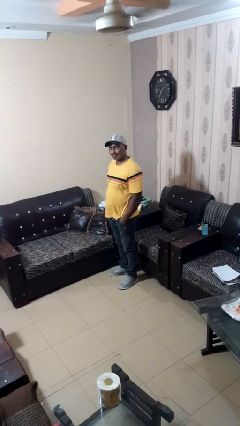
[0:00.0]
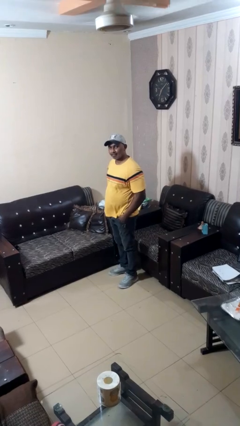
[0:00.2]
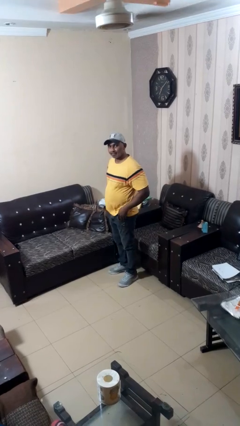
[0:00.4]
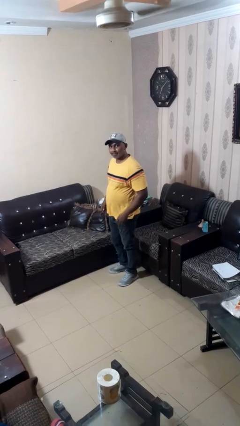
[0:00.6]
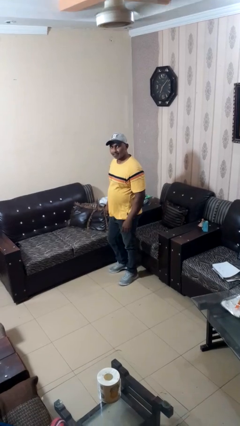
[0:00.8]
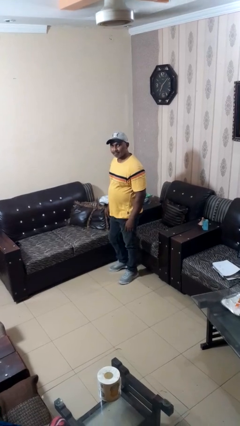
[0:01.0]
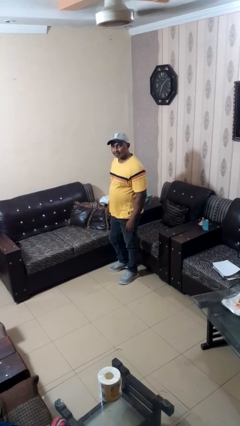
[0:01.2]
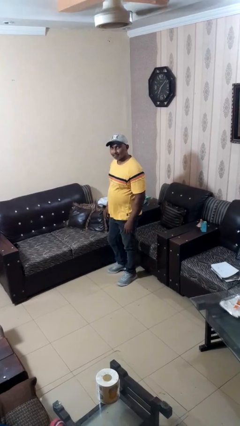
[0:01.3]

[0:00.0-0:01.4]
person puts hands in back pockets

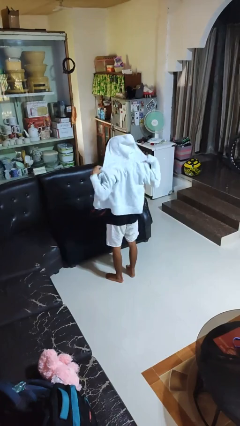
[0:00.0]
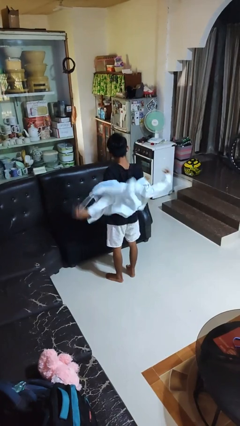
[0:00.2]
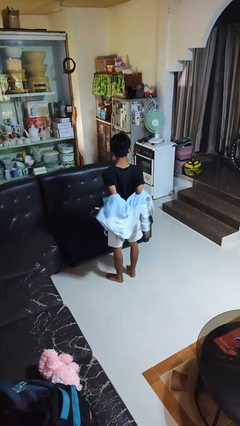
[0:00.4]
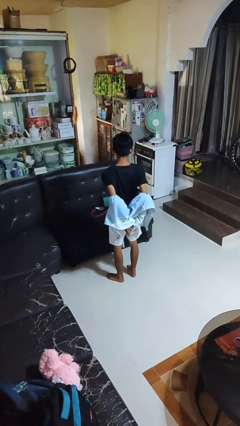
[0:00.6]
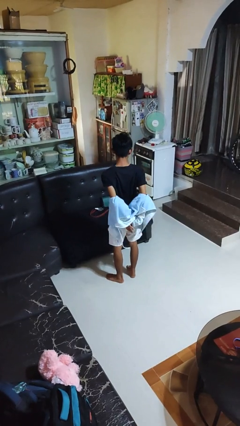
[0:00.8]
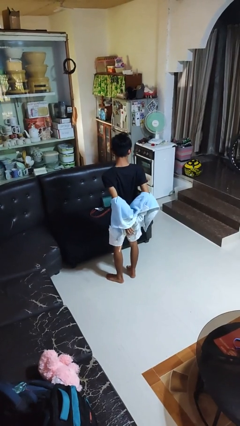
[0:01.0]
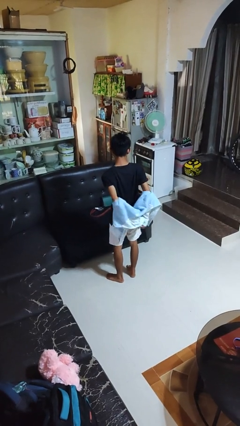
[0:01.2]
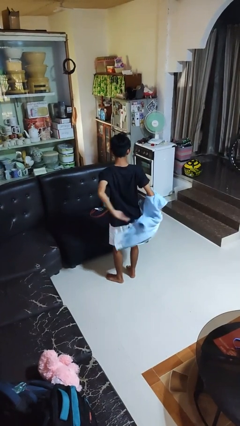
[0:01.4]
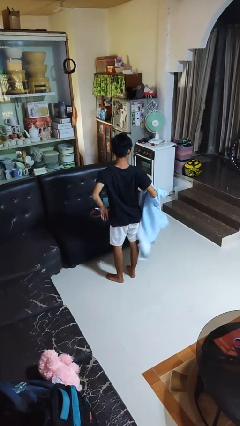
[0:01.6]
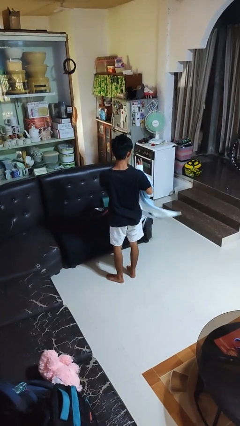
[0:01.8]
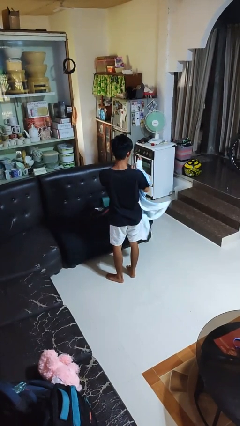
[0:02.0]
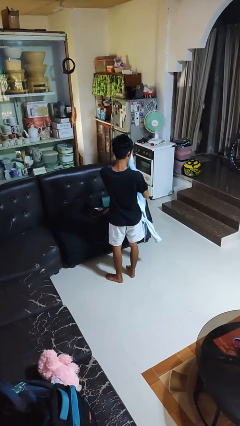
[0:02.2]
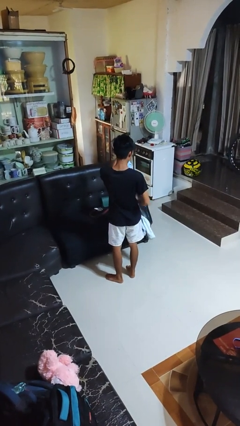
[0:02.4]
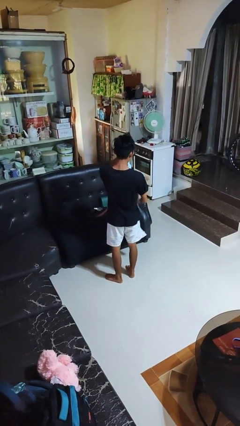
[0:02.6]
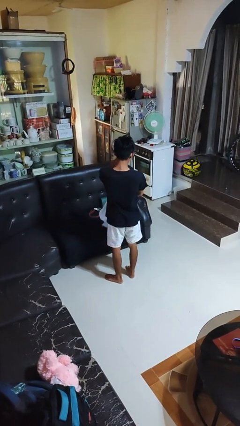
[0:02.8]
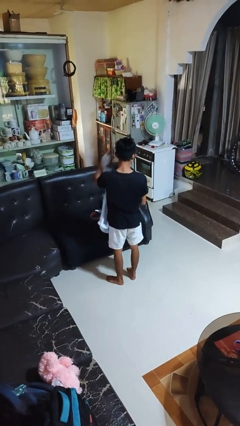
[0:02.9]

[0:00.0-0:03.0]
person takes off hoodie

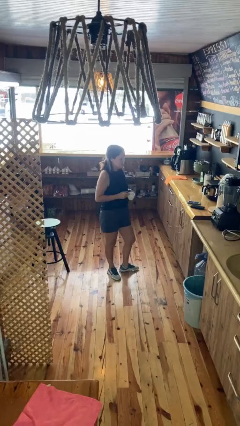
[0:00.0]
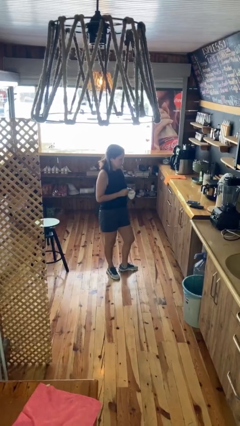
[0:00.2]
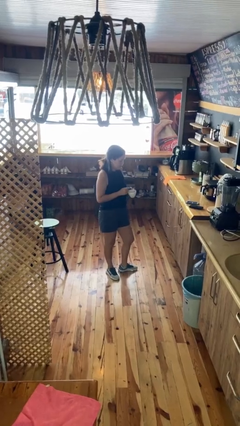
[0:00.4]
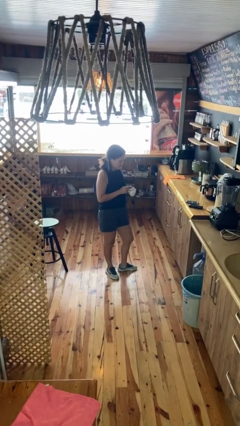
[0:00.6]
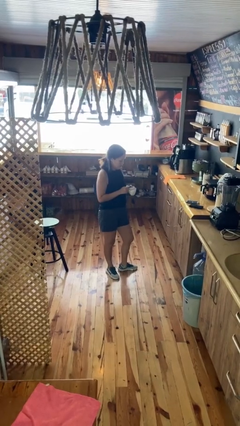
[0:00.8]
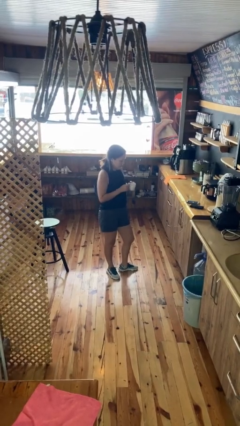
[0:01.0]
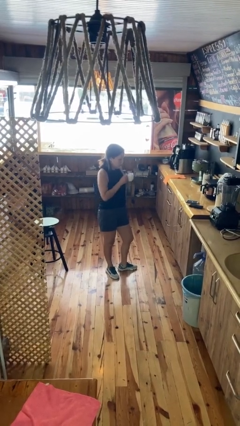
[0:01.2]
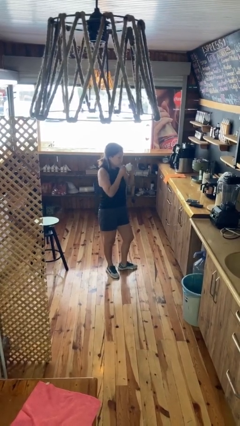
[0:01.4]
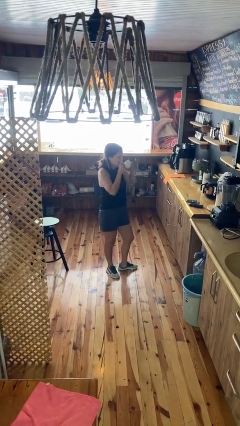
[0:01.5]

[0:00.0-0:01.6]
person stirs mug

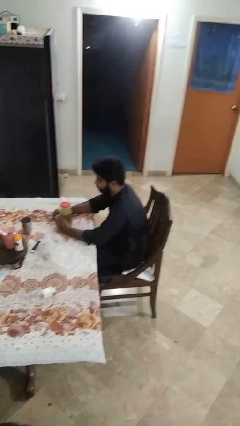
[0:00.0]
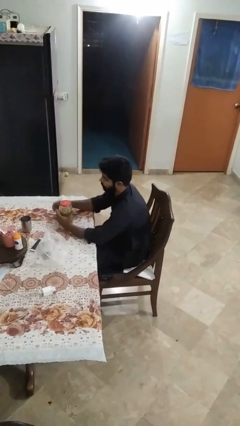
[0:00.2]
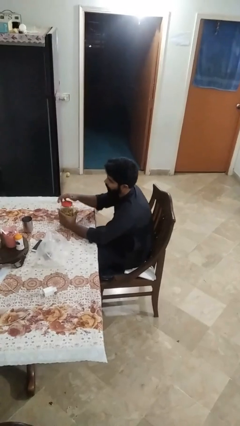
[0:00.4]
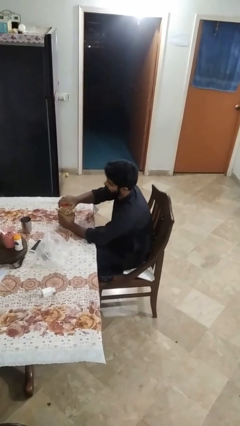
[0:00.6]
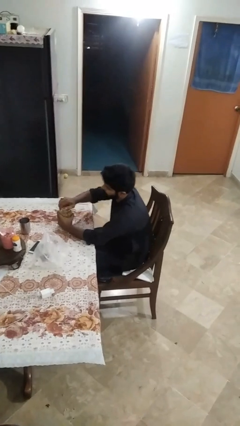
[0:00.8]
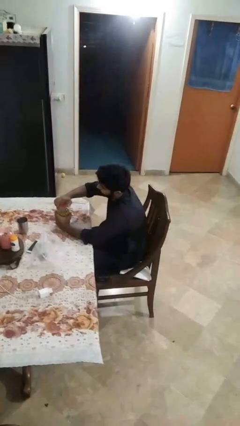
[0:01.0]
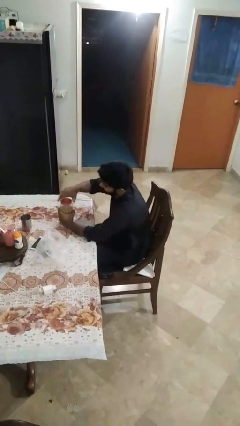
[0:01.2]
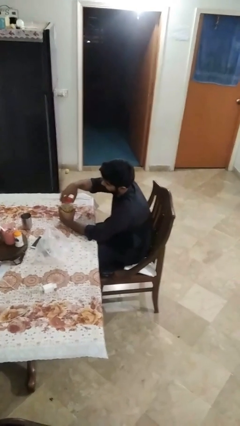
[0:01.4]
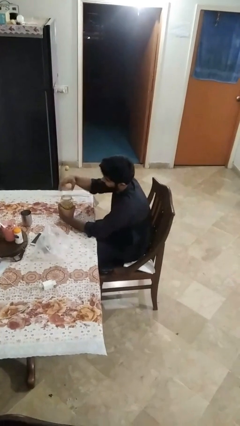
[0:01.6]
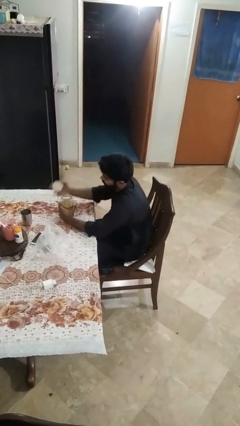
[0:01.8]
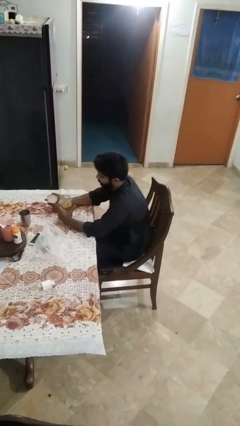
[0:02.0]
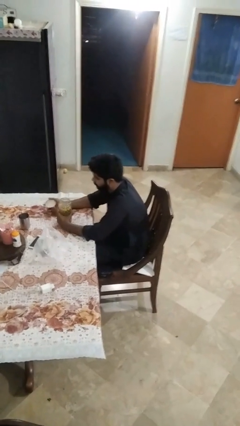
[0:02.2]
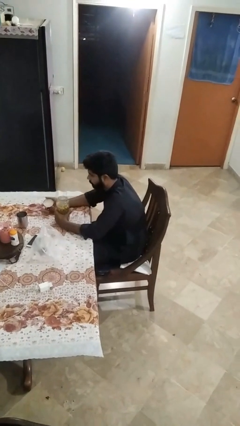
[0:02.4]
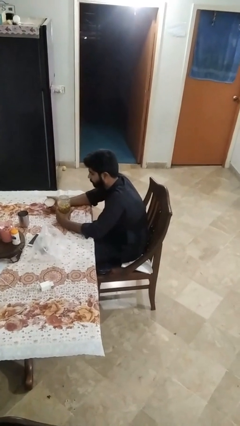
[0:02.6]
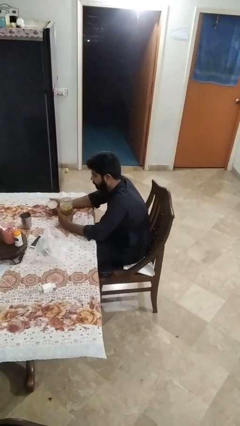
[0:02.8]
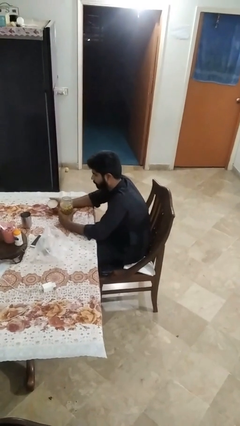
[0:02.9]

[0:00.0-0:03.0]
person opens jar

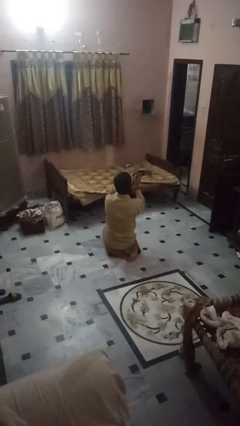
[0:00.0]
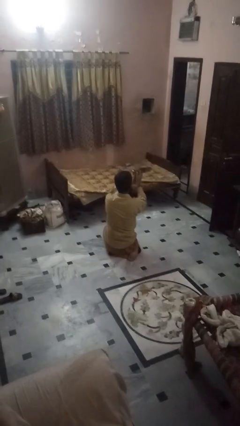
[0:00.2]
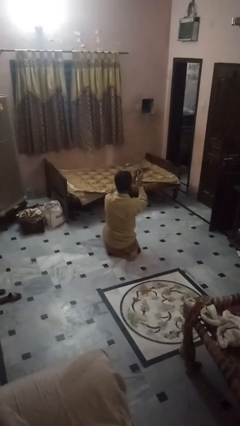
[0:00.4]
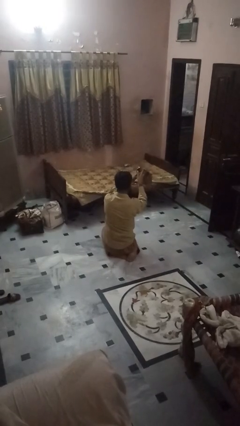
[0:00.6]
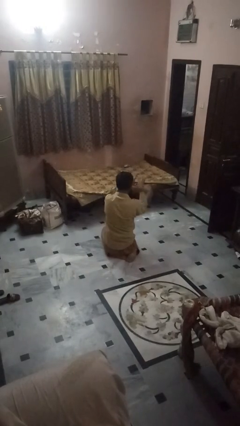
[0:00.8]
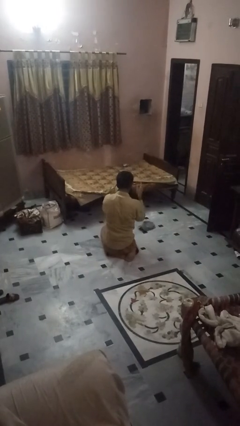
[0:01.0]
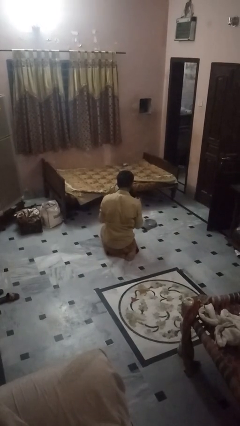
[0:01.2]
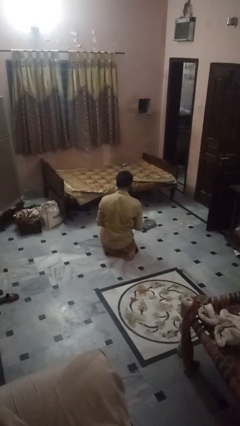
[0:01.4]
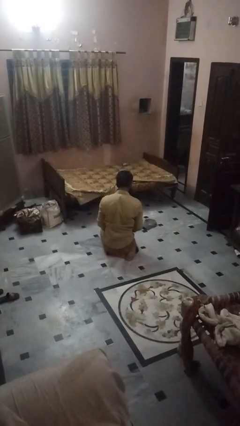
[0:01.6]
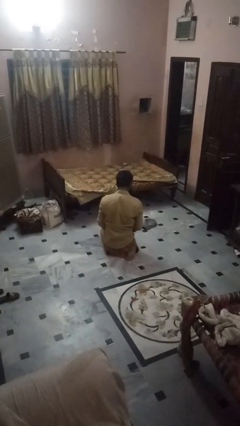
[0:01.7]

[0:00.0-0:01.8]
person catches dropped object

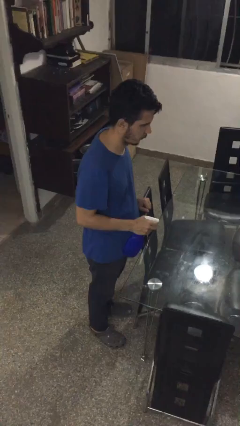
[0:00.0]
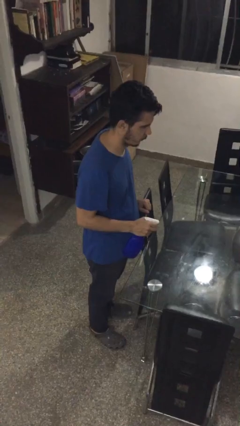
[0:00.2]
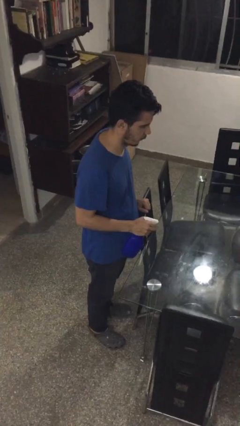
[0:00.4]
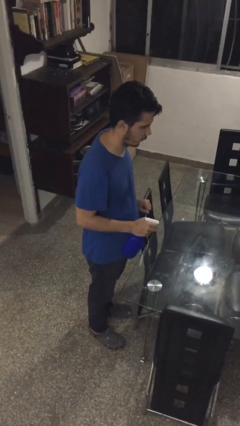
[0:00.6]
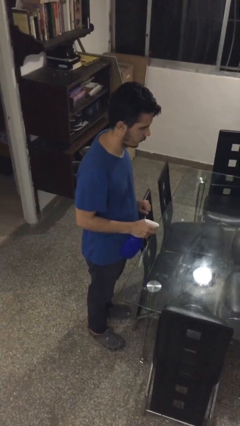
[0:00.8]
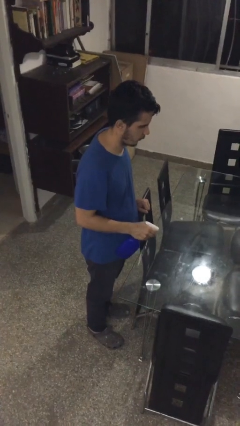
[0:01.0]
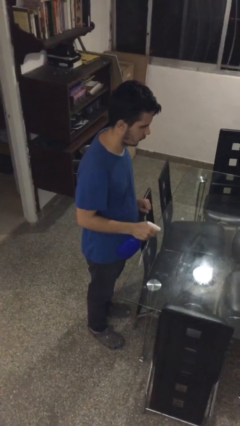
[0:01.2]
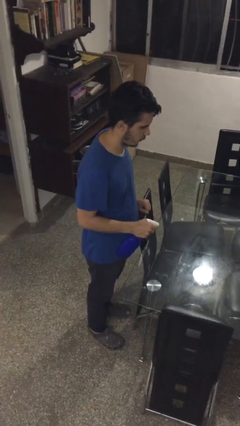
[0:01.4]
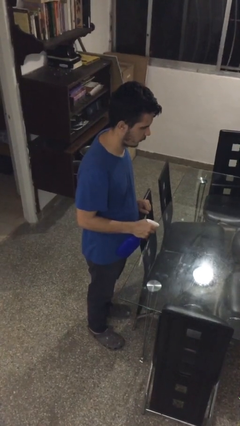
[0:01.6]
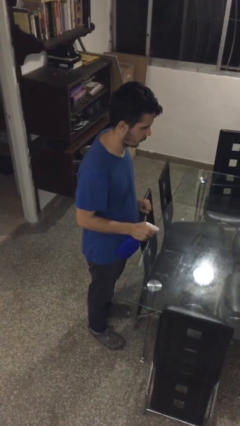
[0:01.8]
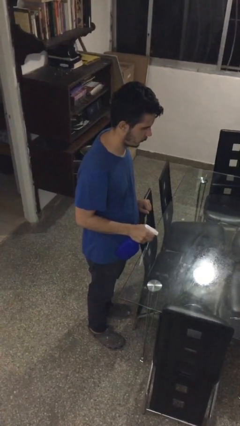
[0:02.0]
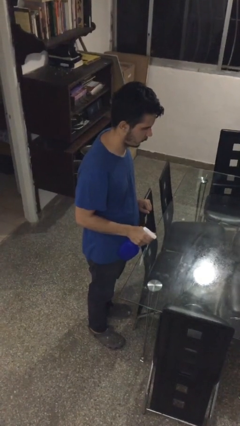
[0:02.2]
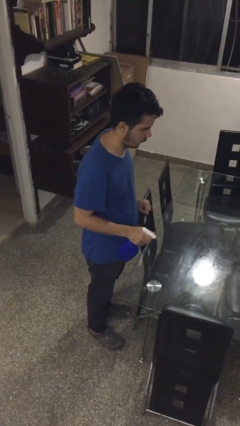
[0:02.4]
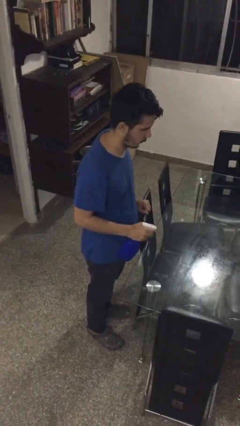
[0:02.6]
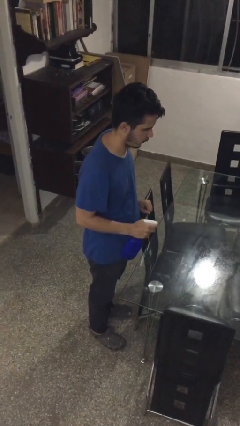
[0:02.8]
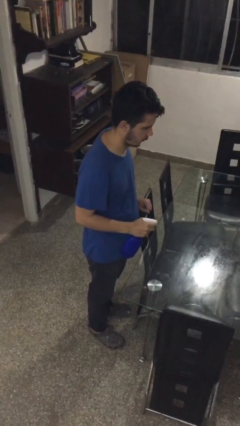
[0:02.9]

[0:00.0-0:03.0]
person sprays from bottle

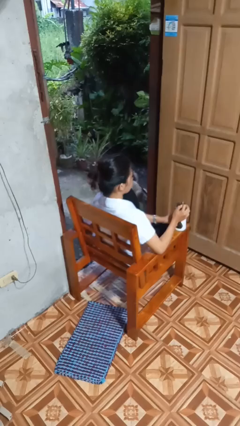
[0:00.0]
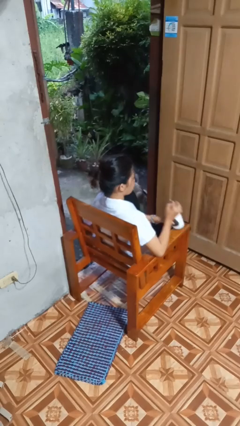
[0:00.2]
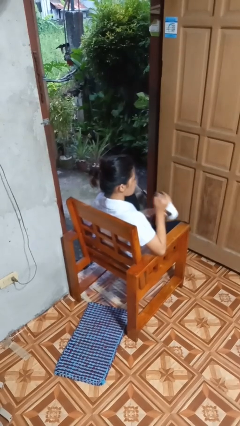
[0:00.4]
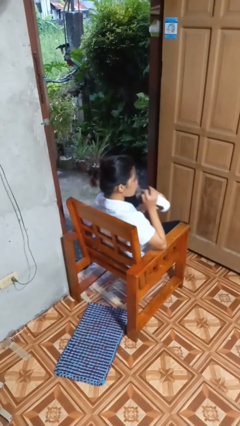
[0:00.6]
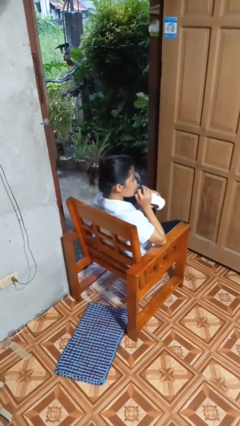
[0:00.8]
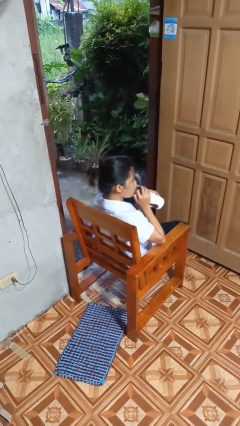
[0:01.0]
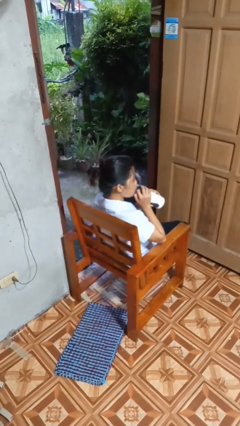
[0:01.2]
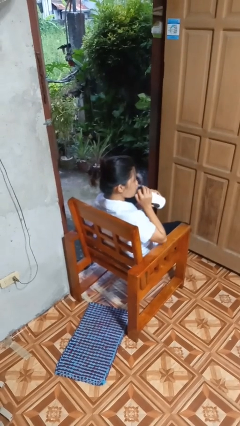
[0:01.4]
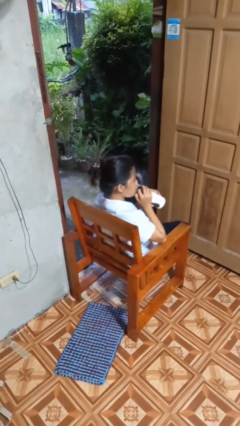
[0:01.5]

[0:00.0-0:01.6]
person drinks from straw

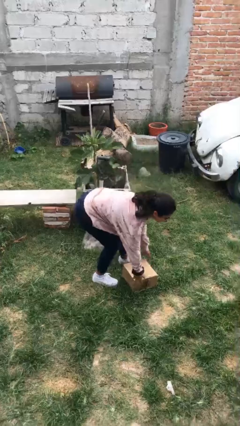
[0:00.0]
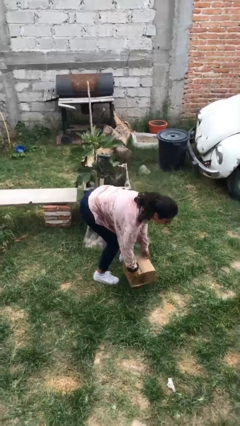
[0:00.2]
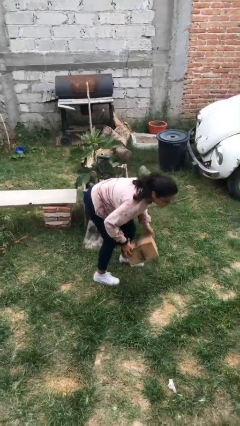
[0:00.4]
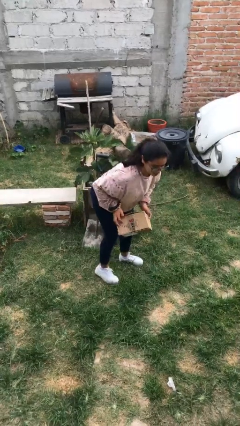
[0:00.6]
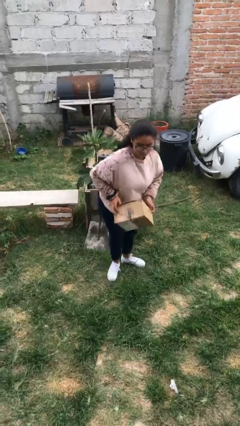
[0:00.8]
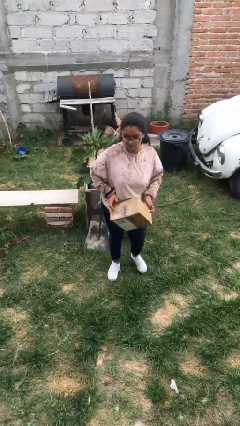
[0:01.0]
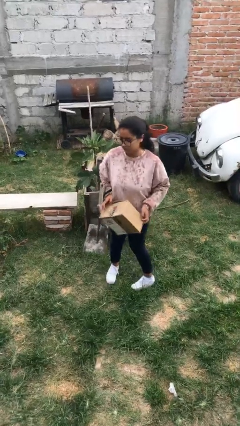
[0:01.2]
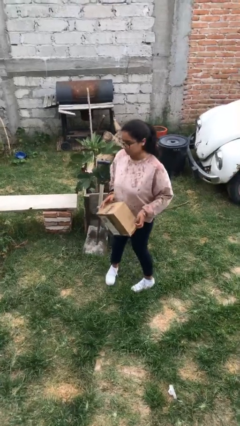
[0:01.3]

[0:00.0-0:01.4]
person picks up object from floor

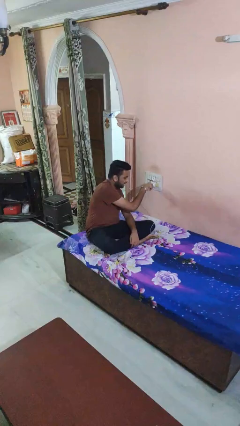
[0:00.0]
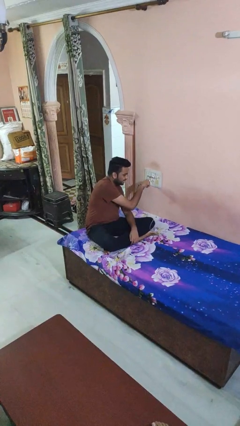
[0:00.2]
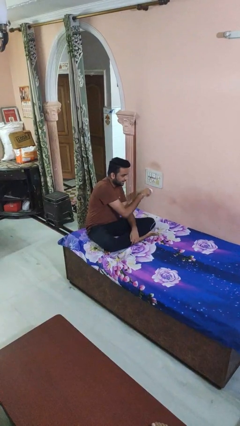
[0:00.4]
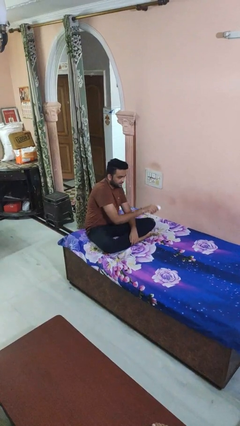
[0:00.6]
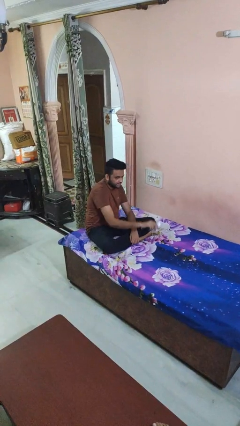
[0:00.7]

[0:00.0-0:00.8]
person unplugs from electrical socket
